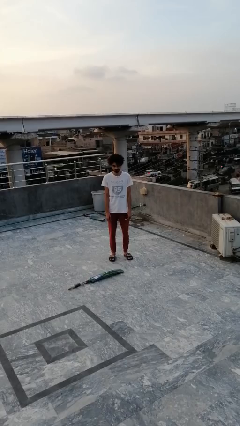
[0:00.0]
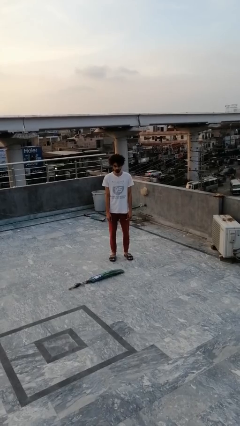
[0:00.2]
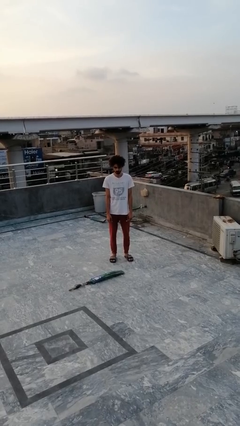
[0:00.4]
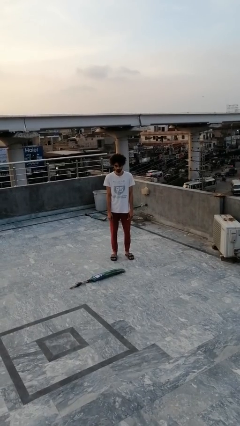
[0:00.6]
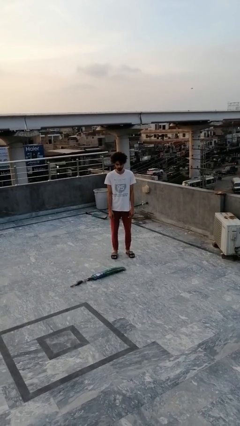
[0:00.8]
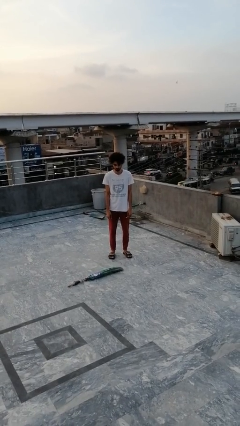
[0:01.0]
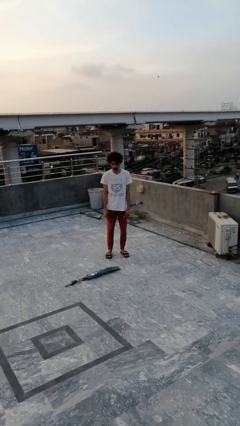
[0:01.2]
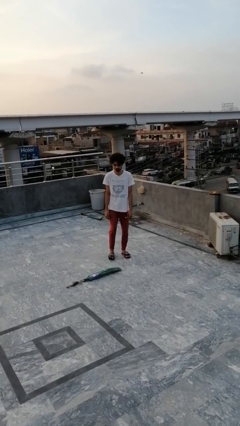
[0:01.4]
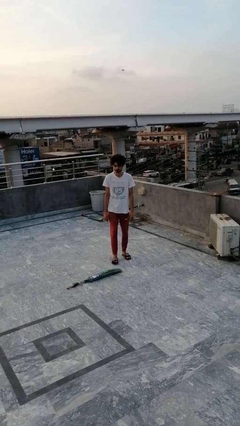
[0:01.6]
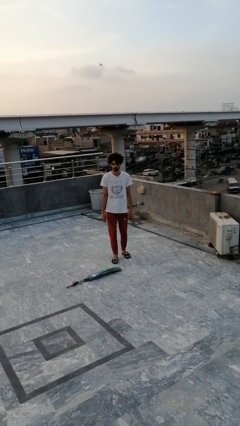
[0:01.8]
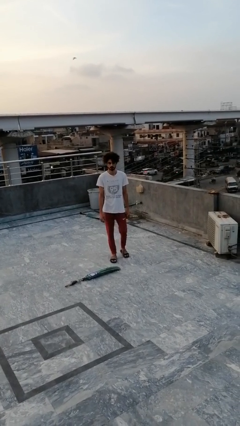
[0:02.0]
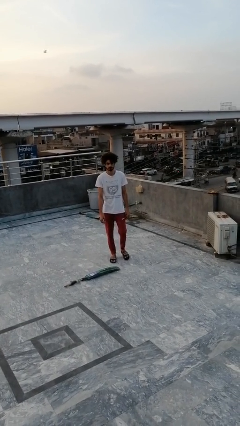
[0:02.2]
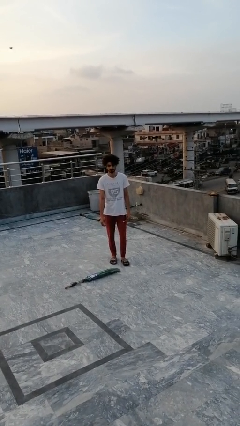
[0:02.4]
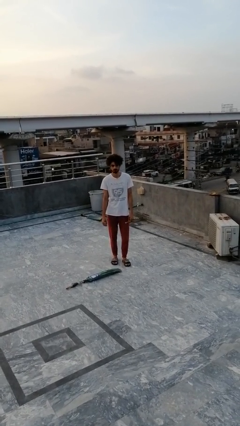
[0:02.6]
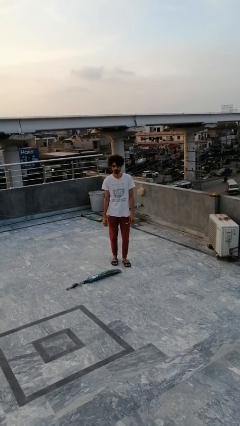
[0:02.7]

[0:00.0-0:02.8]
person trips on object on floor

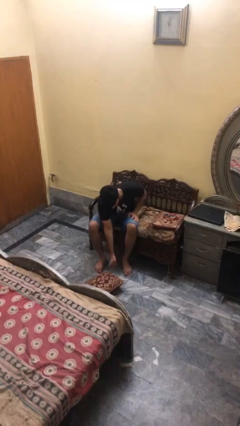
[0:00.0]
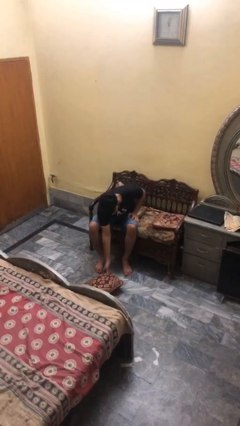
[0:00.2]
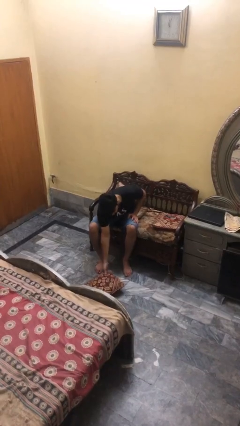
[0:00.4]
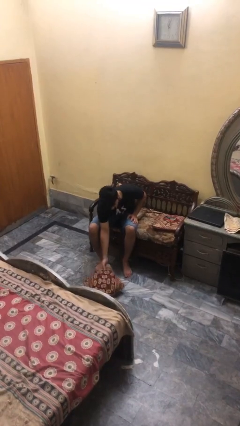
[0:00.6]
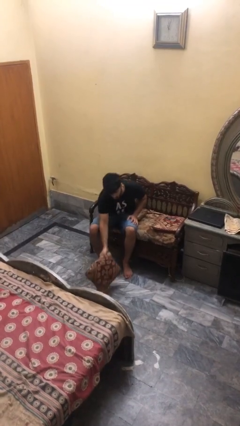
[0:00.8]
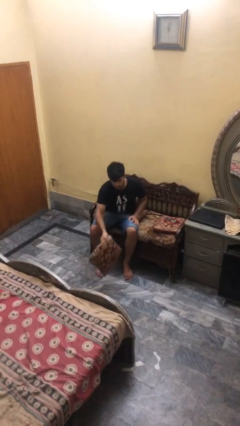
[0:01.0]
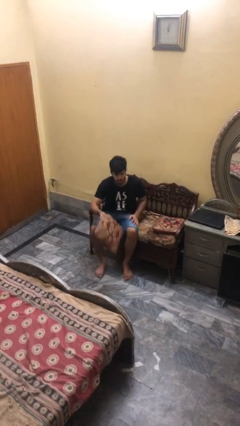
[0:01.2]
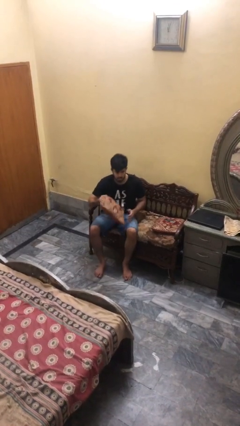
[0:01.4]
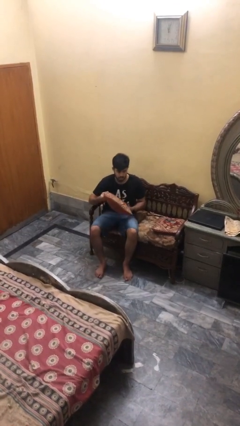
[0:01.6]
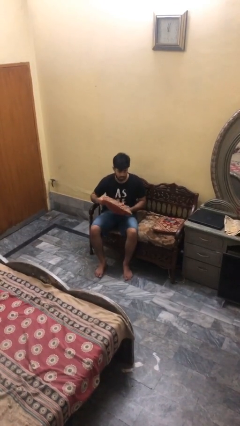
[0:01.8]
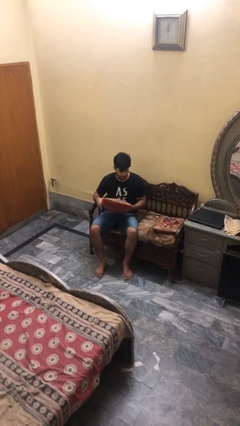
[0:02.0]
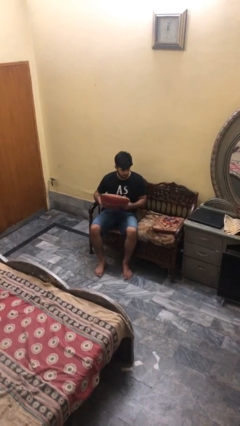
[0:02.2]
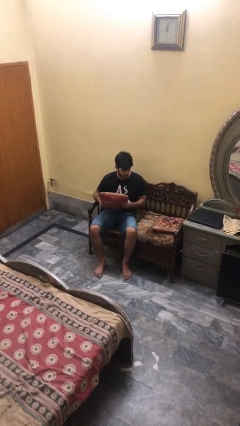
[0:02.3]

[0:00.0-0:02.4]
person picks up object from floor

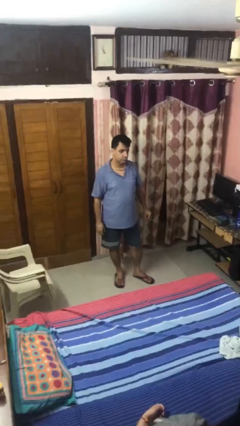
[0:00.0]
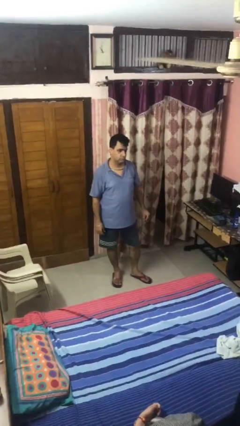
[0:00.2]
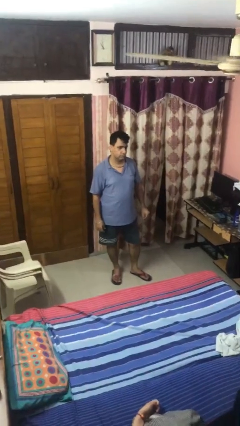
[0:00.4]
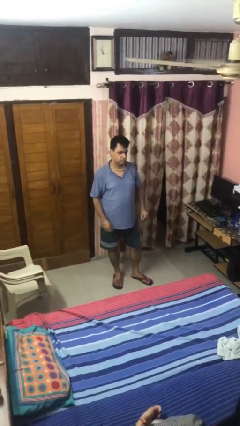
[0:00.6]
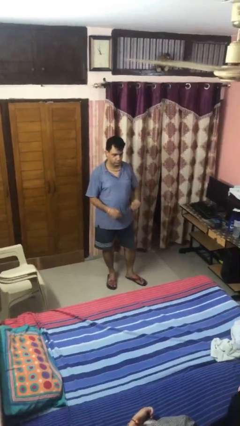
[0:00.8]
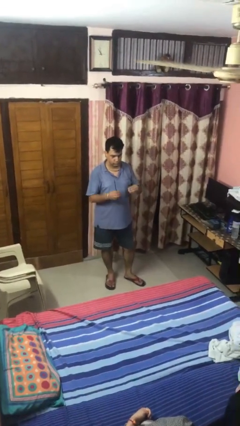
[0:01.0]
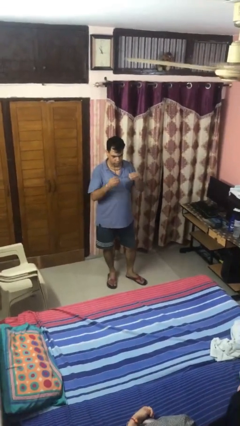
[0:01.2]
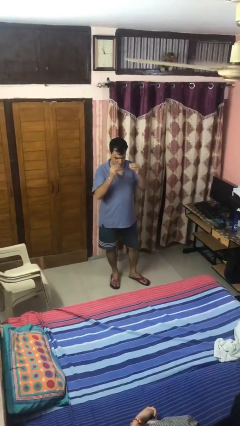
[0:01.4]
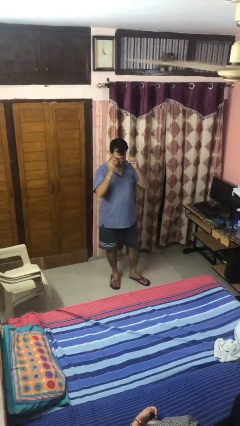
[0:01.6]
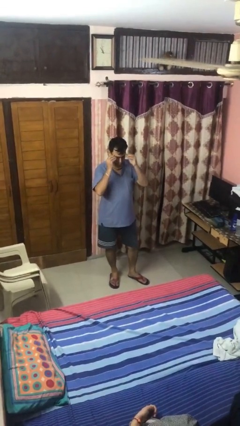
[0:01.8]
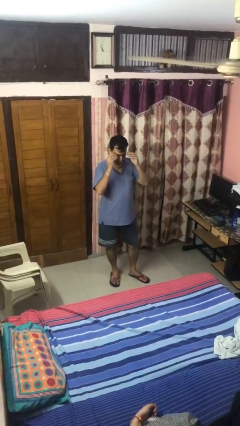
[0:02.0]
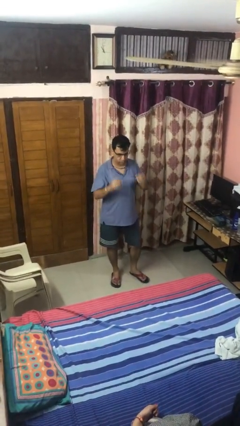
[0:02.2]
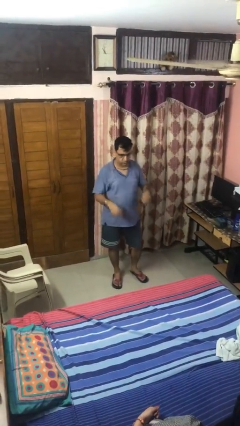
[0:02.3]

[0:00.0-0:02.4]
person puts on glasses

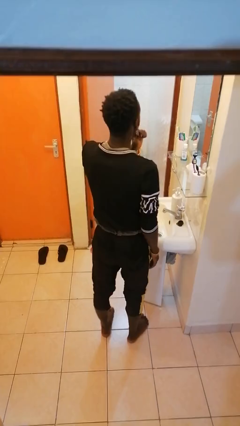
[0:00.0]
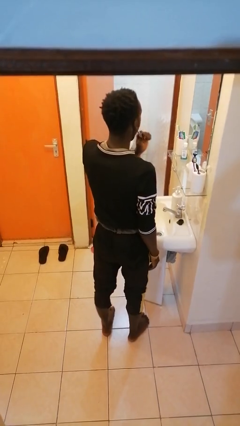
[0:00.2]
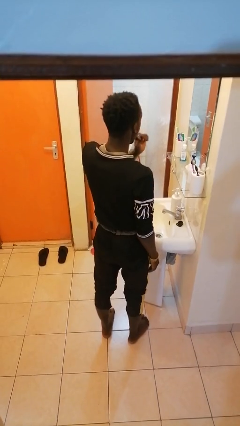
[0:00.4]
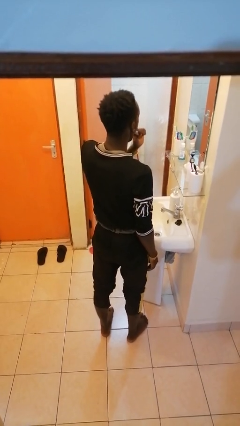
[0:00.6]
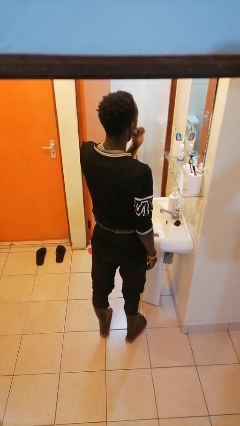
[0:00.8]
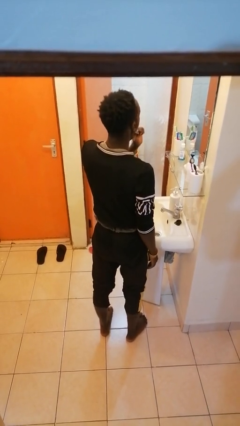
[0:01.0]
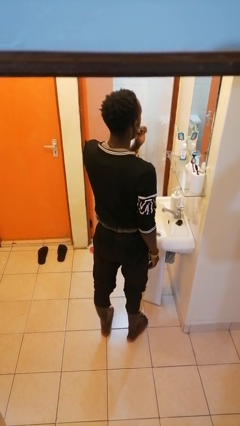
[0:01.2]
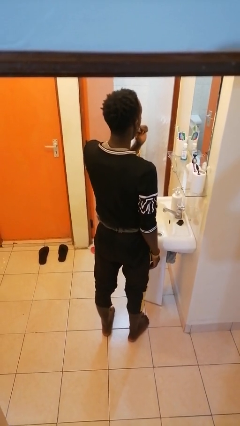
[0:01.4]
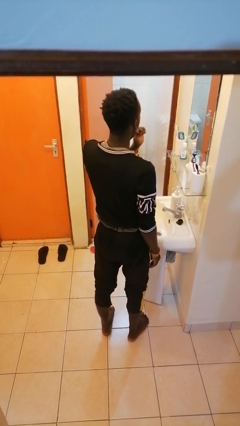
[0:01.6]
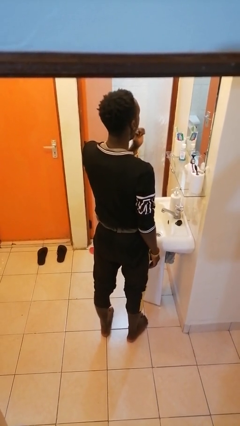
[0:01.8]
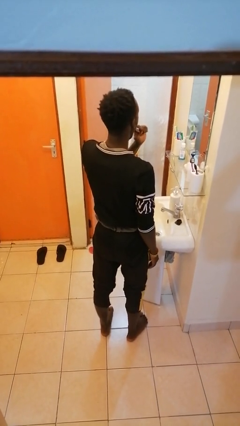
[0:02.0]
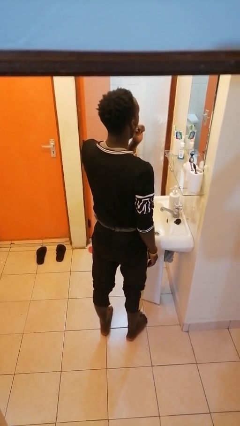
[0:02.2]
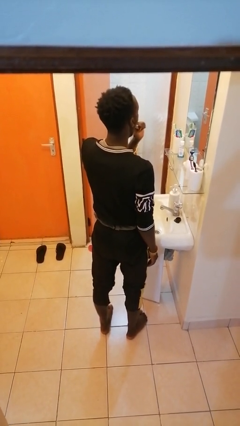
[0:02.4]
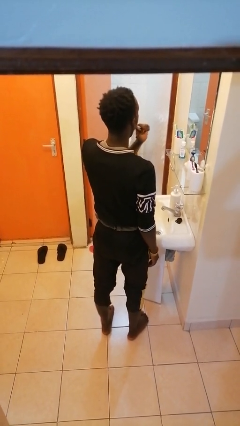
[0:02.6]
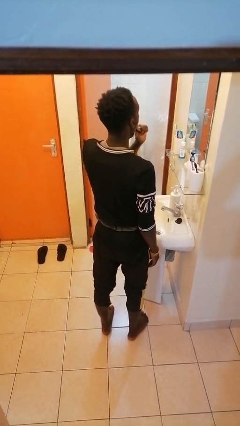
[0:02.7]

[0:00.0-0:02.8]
person brushes teeth

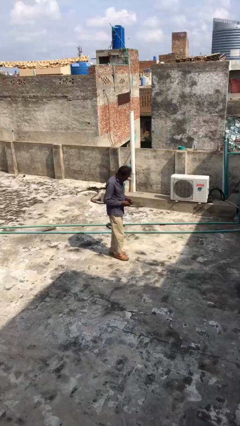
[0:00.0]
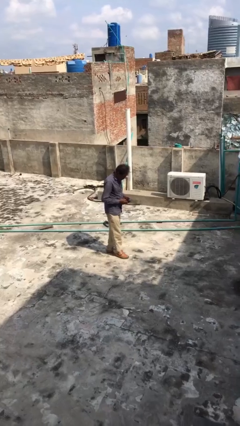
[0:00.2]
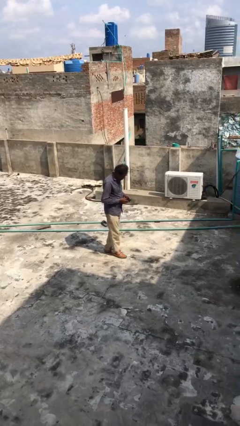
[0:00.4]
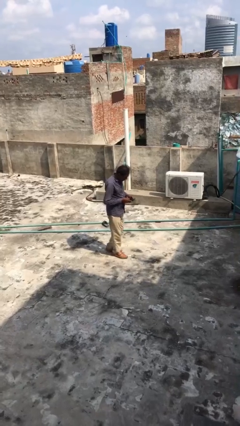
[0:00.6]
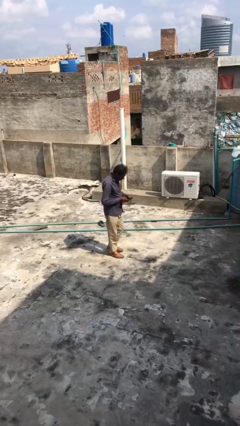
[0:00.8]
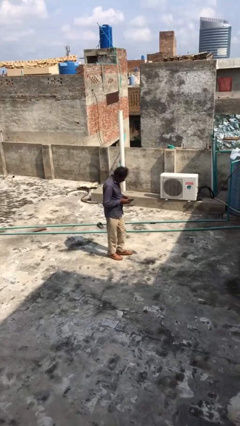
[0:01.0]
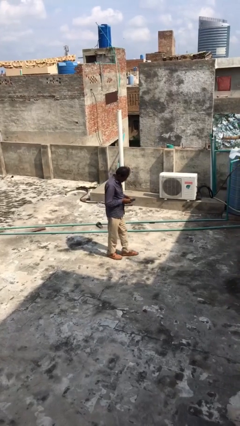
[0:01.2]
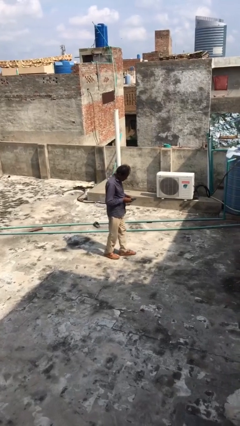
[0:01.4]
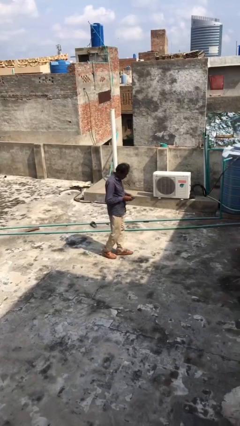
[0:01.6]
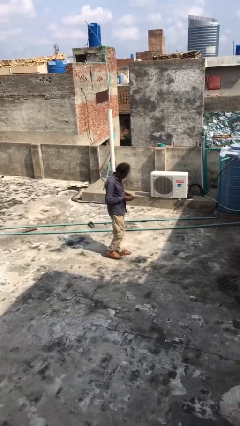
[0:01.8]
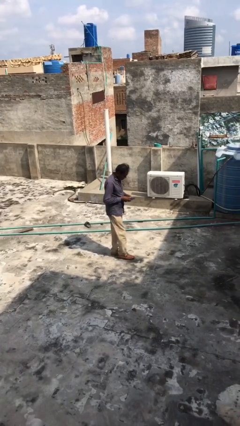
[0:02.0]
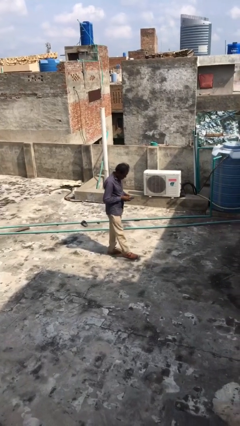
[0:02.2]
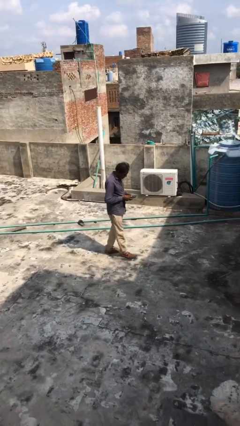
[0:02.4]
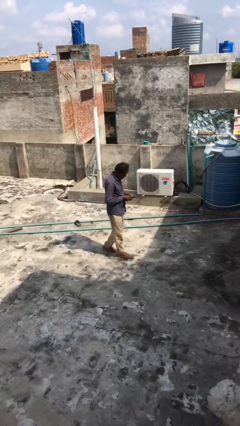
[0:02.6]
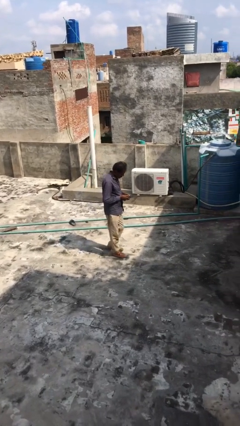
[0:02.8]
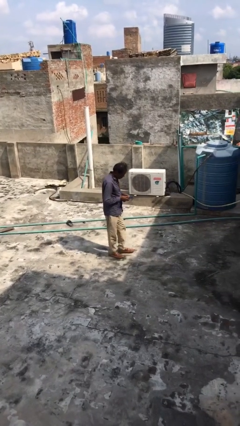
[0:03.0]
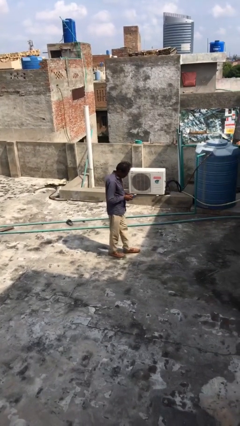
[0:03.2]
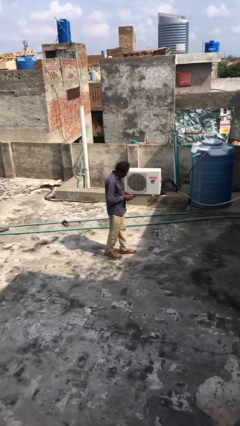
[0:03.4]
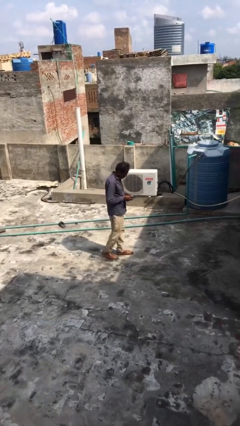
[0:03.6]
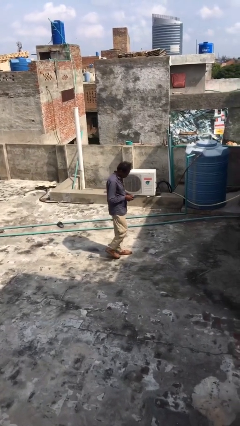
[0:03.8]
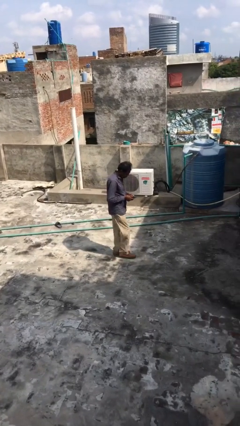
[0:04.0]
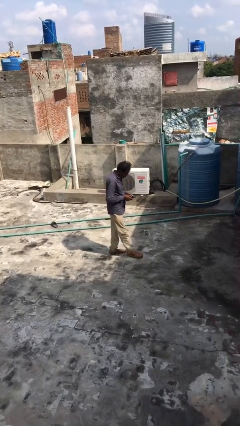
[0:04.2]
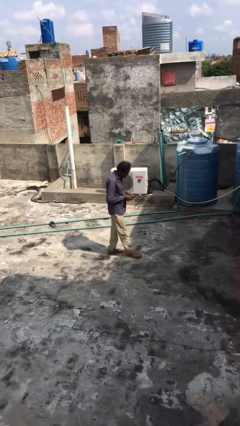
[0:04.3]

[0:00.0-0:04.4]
person texts on phone

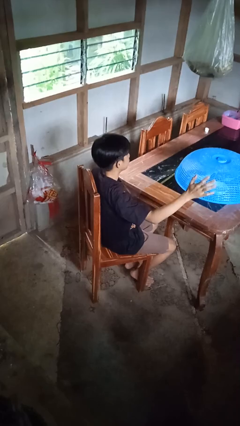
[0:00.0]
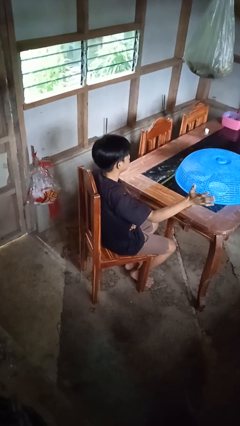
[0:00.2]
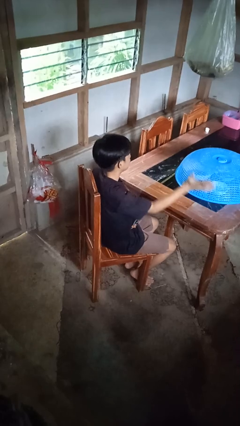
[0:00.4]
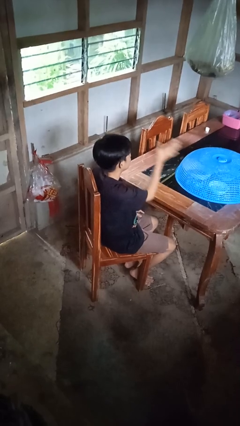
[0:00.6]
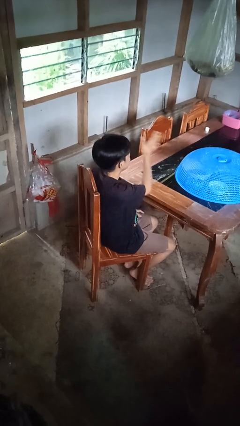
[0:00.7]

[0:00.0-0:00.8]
person gestures swipe right

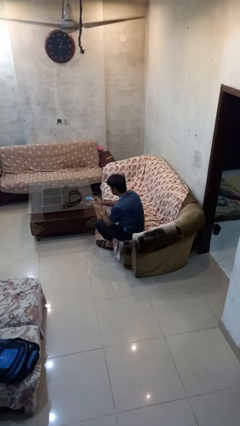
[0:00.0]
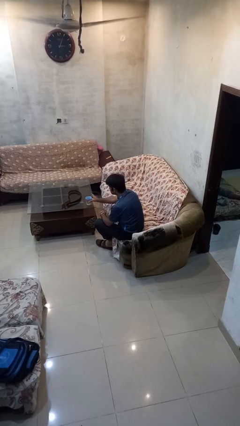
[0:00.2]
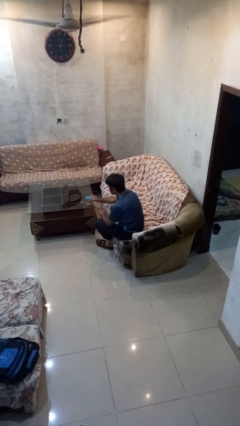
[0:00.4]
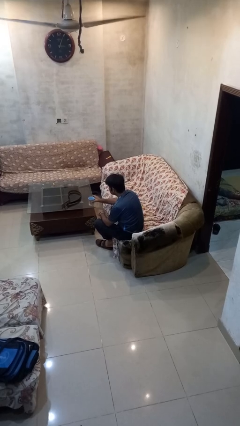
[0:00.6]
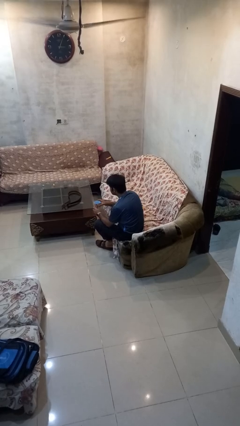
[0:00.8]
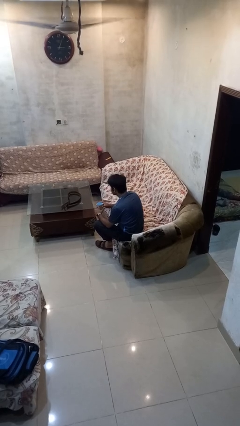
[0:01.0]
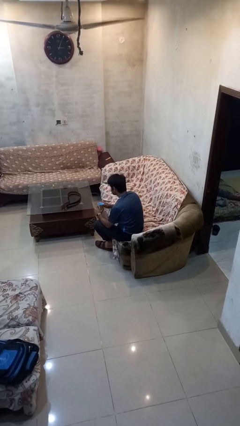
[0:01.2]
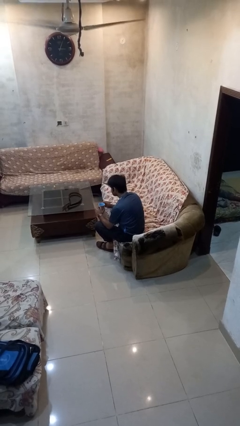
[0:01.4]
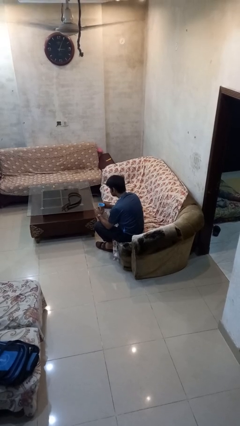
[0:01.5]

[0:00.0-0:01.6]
person picks up object from table

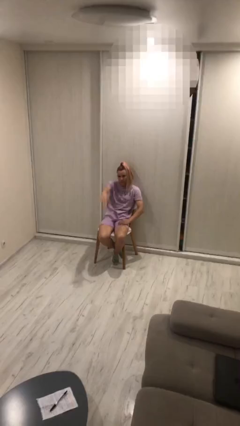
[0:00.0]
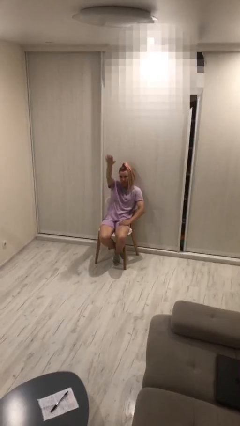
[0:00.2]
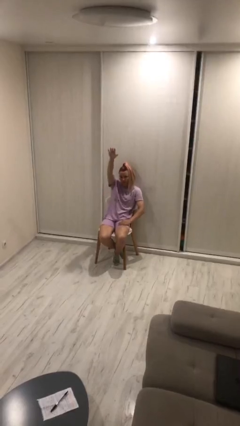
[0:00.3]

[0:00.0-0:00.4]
person gestures swipe up
